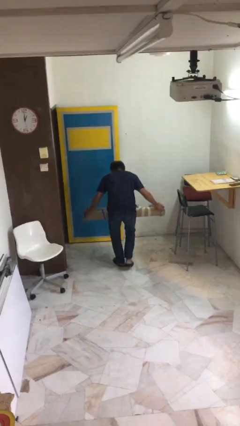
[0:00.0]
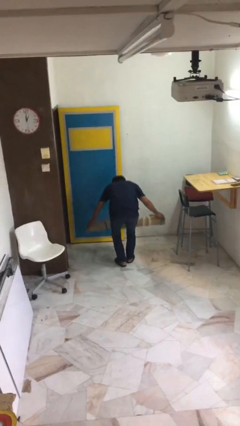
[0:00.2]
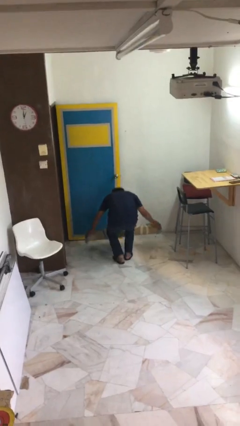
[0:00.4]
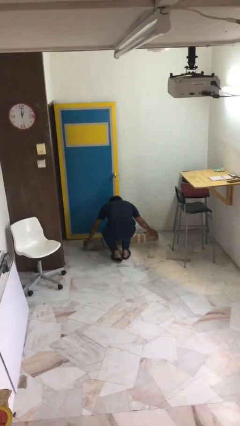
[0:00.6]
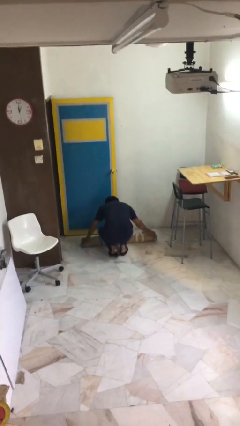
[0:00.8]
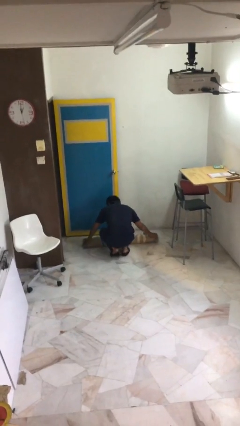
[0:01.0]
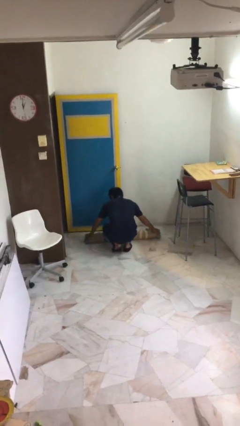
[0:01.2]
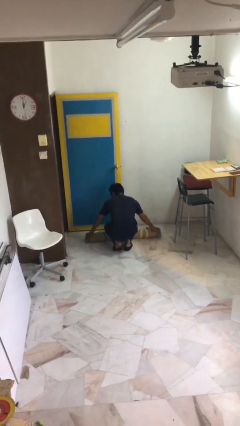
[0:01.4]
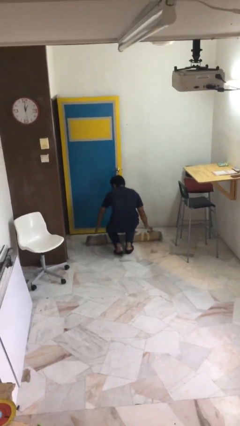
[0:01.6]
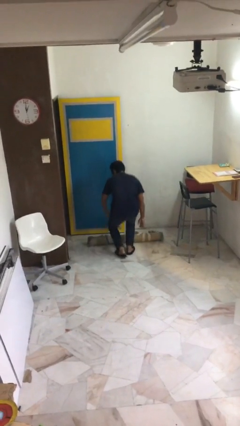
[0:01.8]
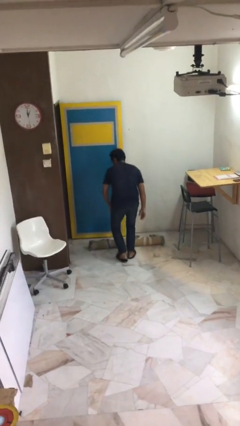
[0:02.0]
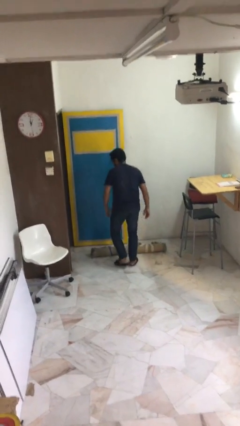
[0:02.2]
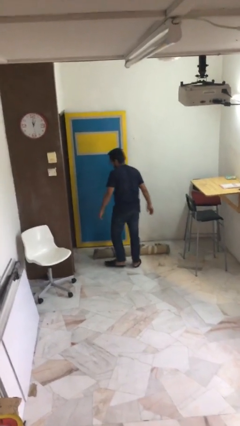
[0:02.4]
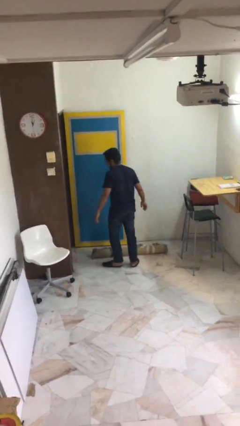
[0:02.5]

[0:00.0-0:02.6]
person puts down object on floor

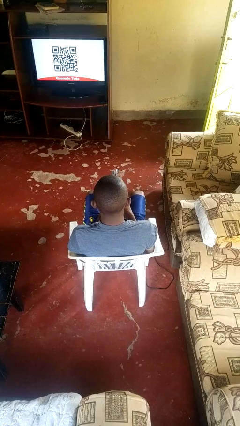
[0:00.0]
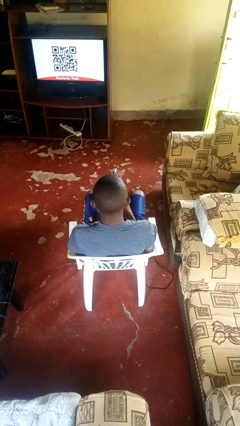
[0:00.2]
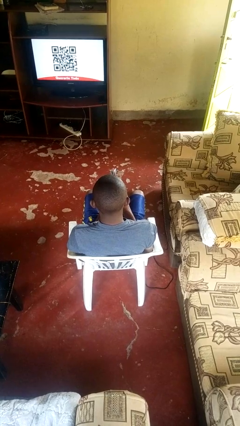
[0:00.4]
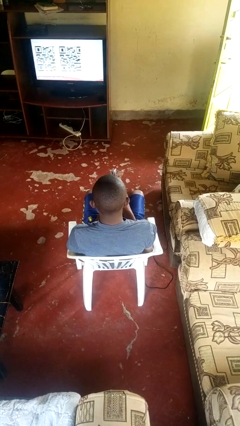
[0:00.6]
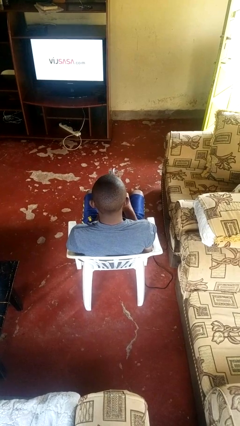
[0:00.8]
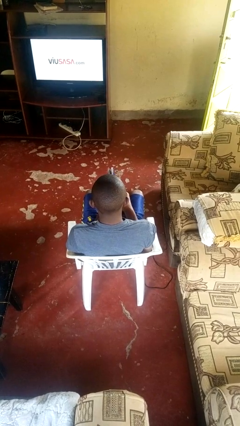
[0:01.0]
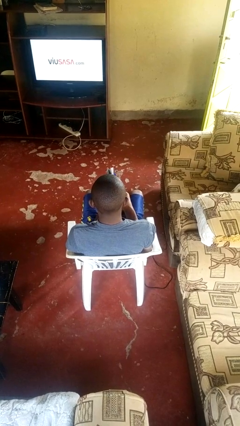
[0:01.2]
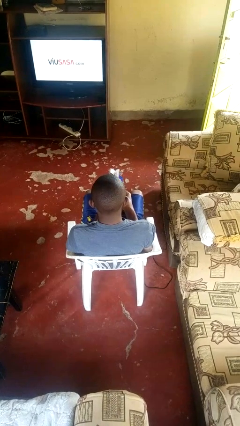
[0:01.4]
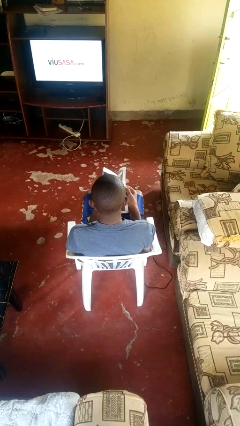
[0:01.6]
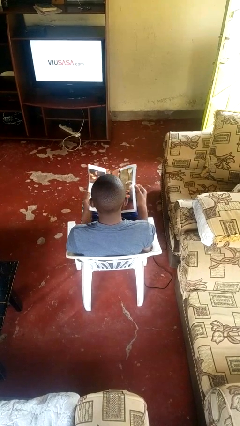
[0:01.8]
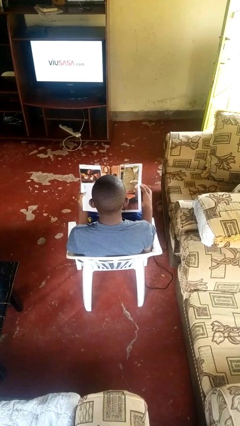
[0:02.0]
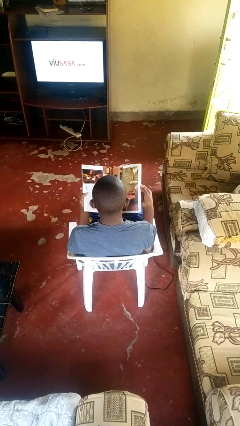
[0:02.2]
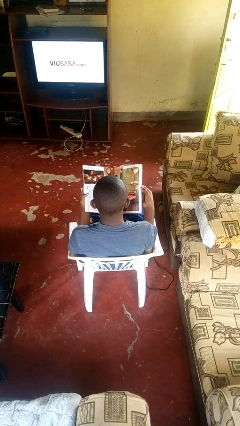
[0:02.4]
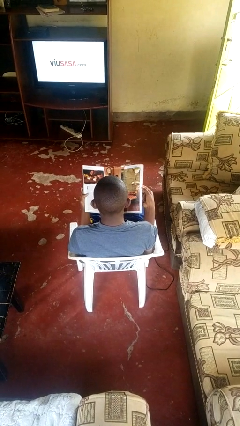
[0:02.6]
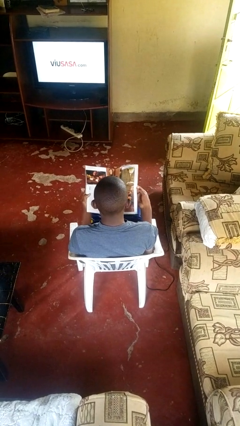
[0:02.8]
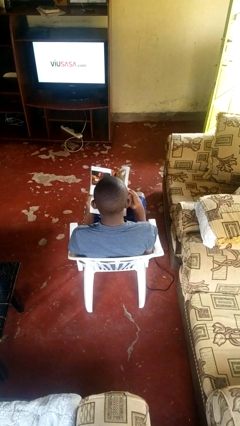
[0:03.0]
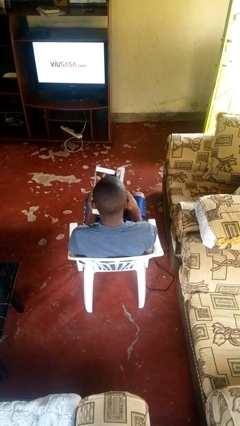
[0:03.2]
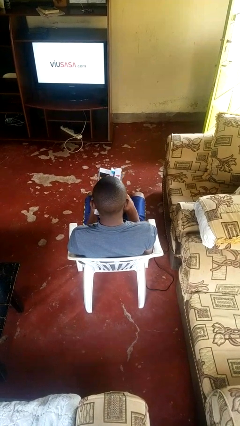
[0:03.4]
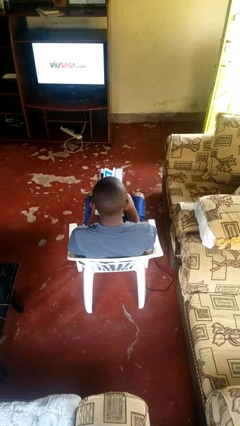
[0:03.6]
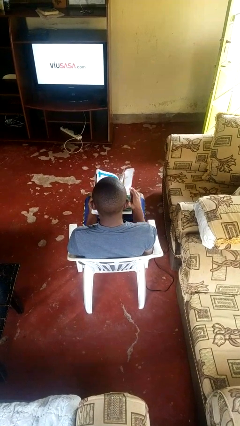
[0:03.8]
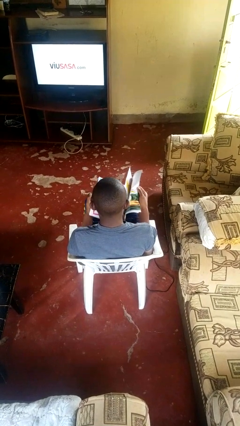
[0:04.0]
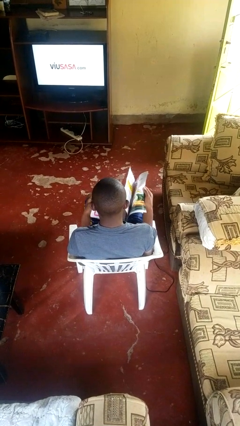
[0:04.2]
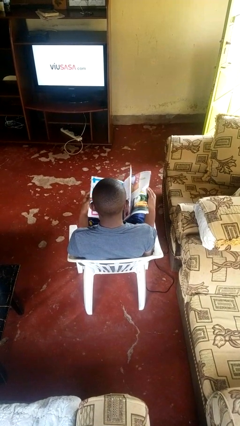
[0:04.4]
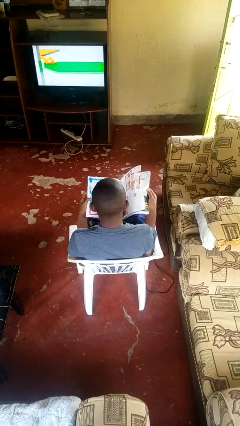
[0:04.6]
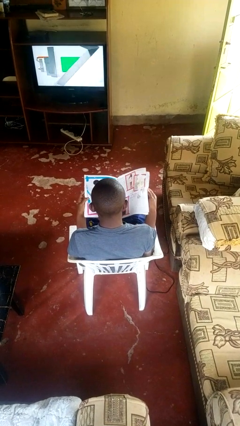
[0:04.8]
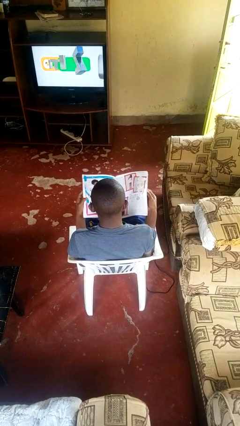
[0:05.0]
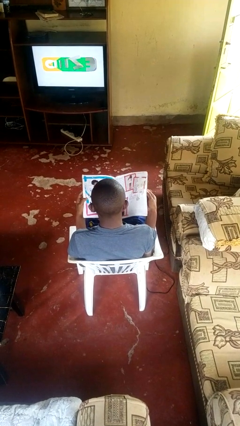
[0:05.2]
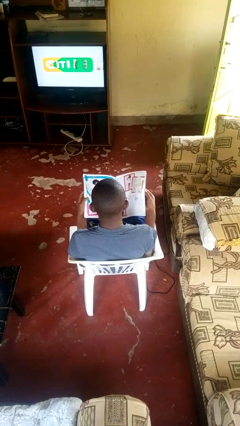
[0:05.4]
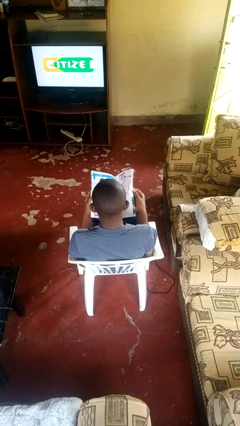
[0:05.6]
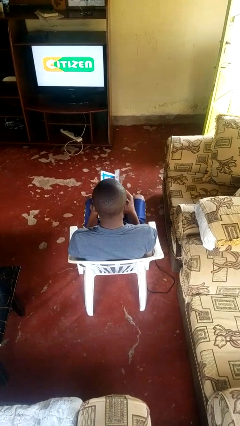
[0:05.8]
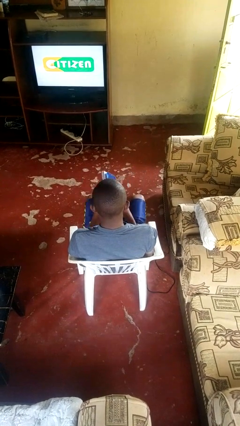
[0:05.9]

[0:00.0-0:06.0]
person reads magazine

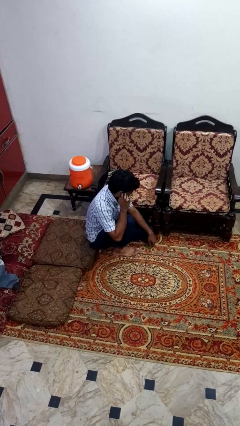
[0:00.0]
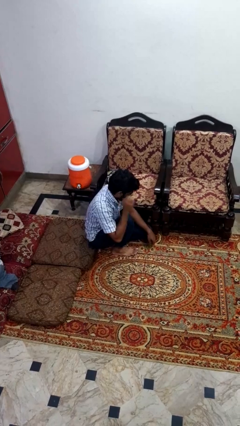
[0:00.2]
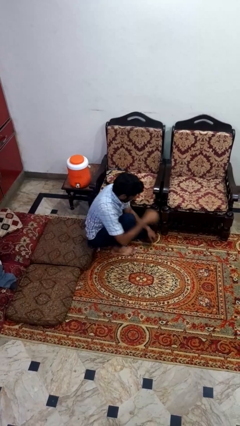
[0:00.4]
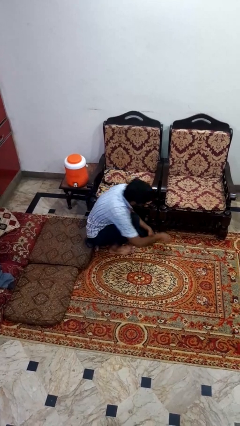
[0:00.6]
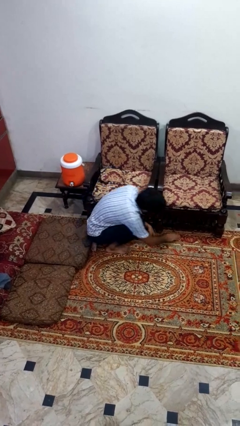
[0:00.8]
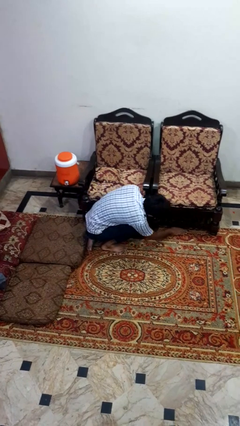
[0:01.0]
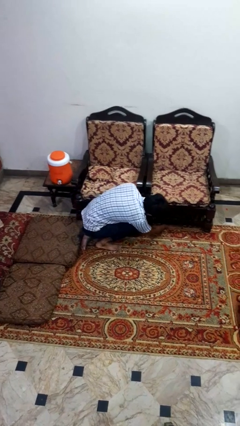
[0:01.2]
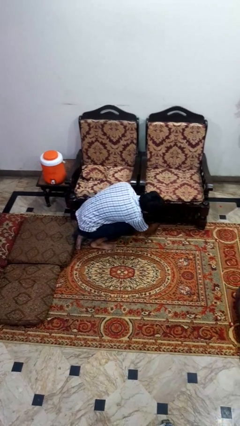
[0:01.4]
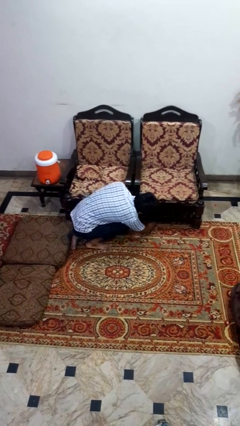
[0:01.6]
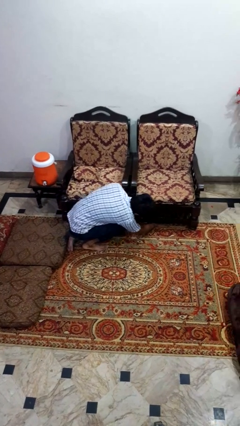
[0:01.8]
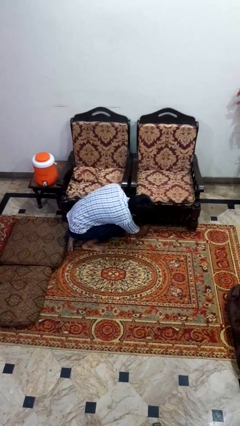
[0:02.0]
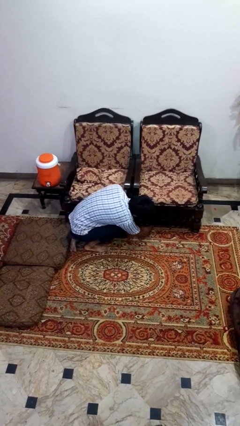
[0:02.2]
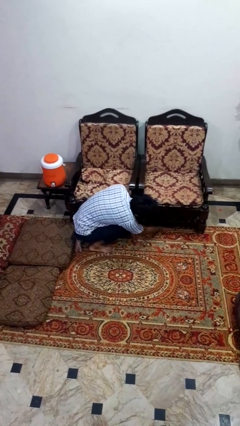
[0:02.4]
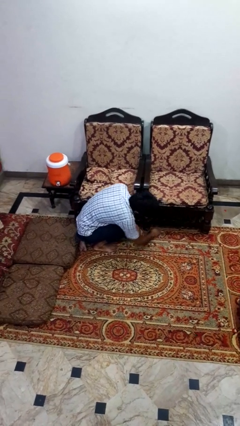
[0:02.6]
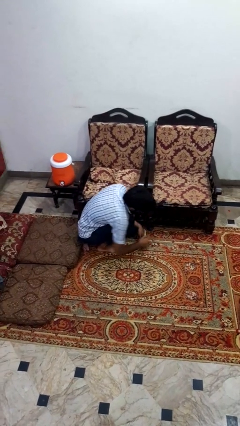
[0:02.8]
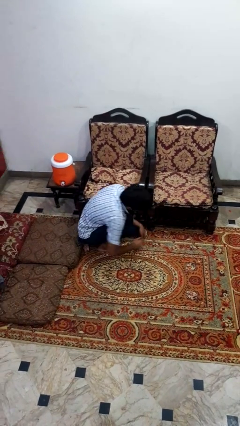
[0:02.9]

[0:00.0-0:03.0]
person searches under couch

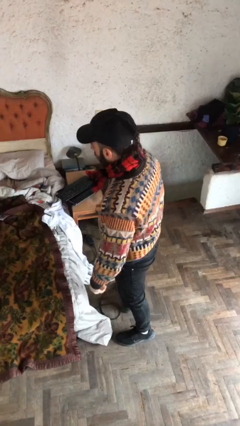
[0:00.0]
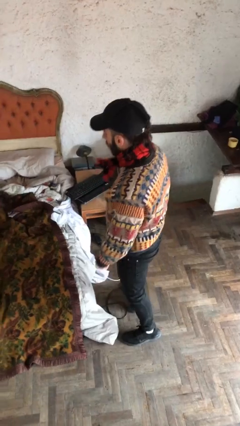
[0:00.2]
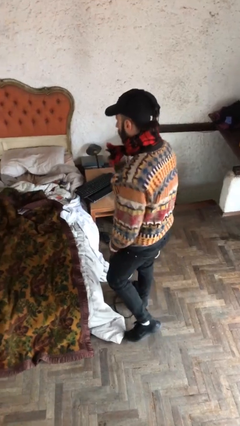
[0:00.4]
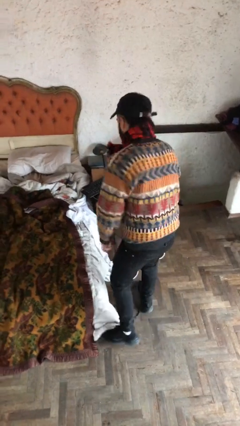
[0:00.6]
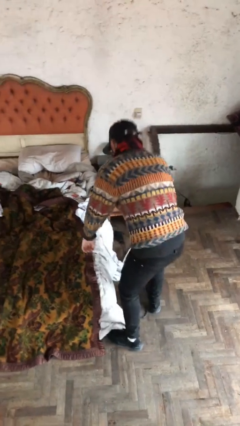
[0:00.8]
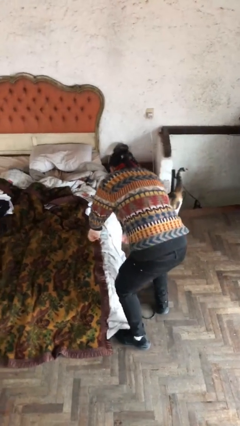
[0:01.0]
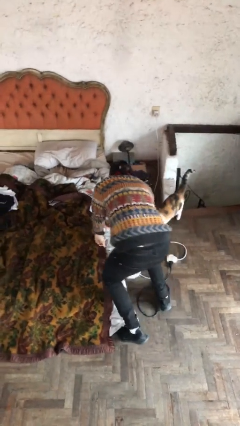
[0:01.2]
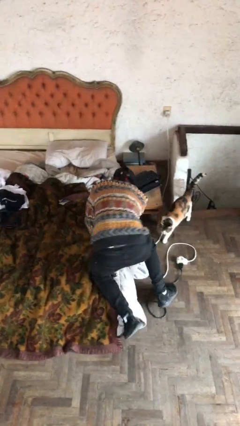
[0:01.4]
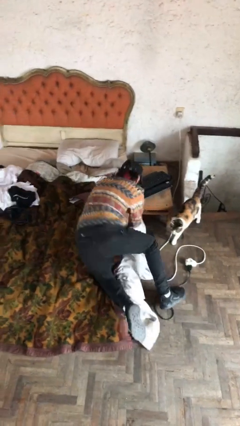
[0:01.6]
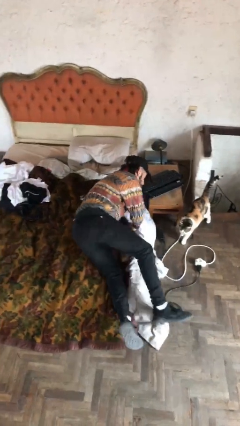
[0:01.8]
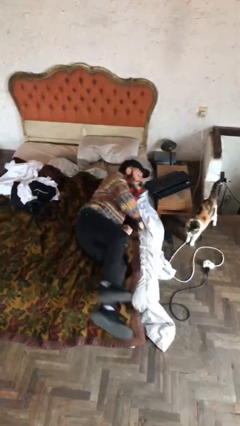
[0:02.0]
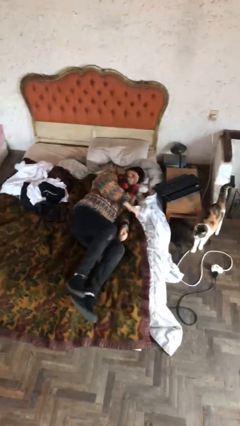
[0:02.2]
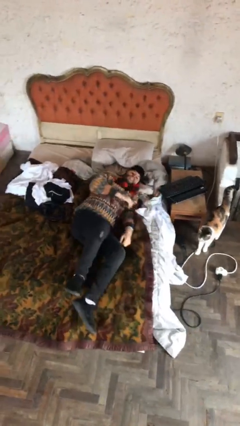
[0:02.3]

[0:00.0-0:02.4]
person lies down on bed

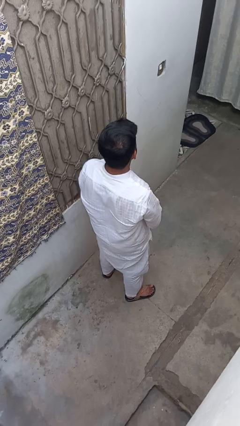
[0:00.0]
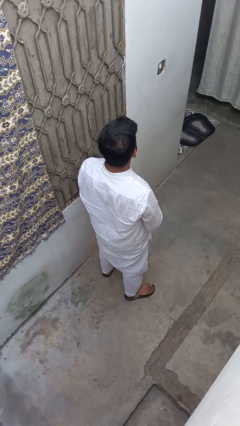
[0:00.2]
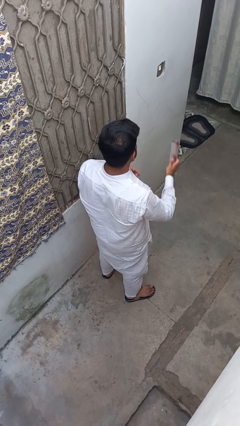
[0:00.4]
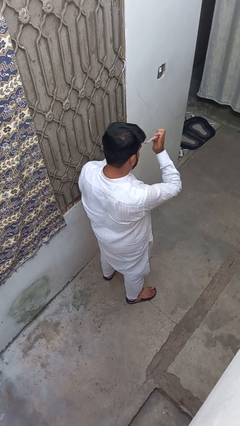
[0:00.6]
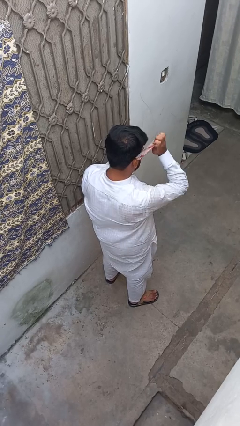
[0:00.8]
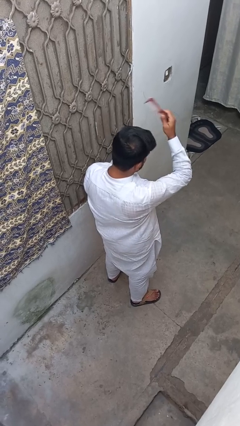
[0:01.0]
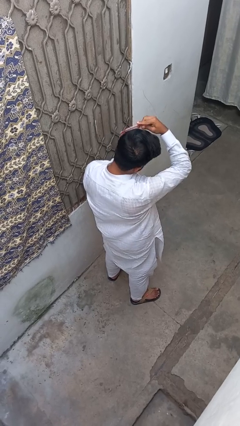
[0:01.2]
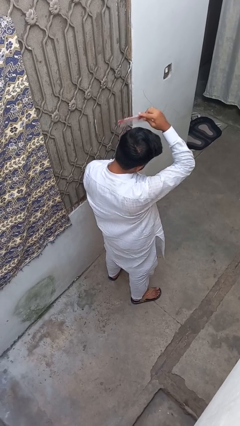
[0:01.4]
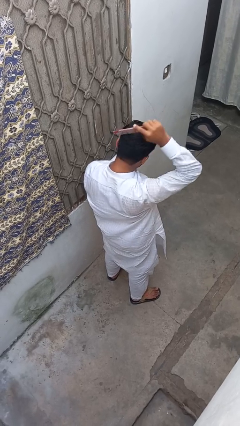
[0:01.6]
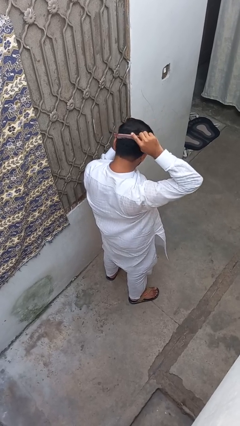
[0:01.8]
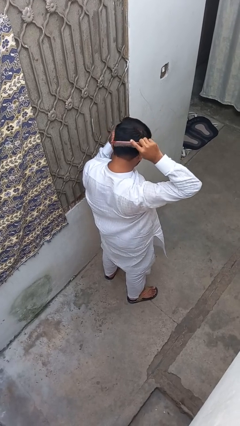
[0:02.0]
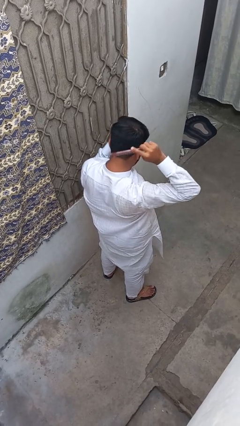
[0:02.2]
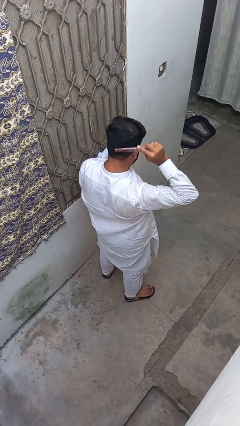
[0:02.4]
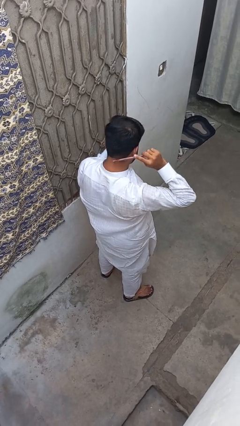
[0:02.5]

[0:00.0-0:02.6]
person brushes hair

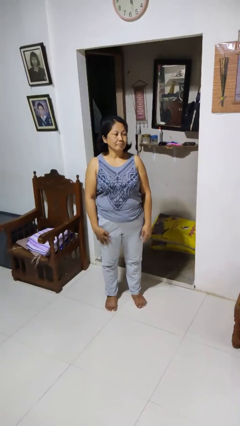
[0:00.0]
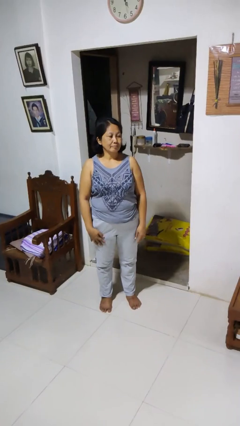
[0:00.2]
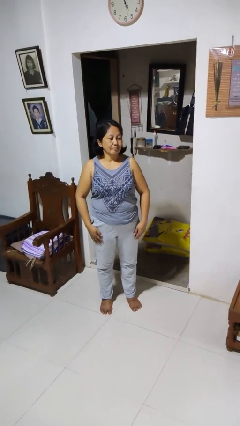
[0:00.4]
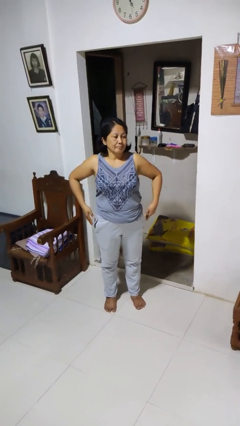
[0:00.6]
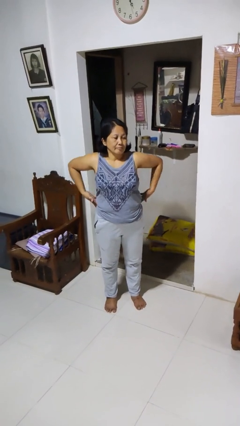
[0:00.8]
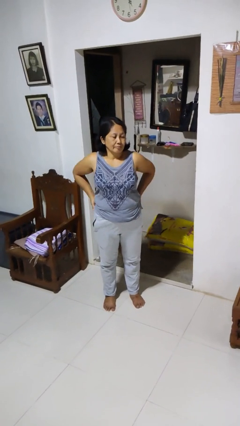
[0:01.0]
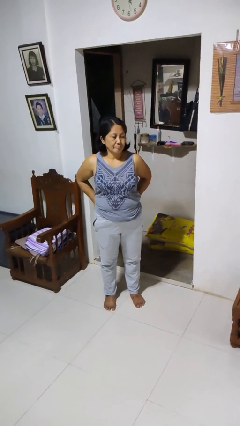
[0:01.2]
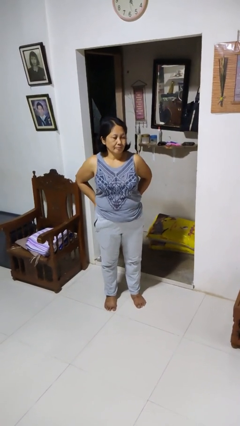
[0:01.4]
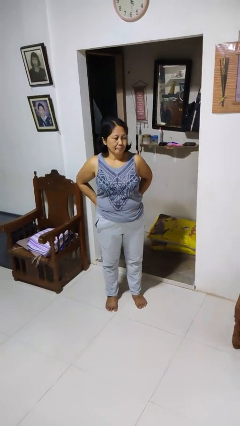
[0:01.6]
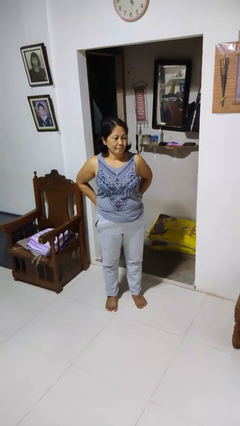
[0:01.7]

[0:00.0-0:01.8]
person puts hands in back pockets
